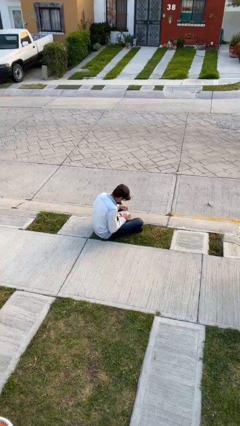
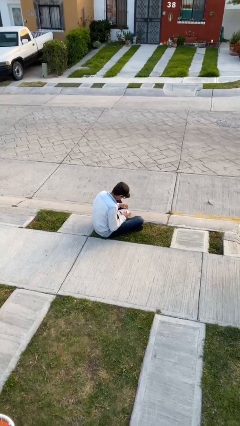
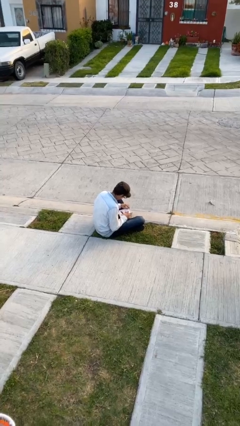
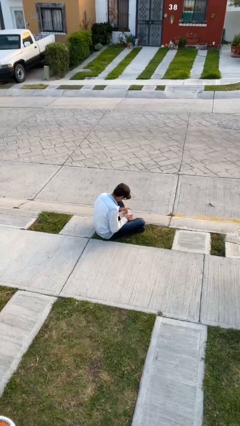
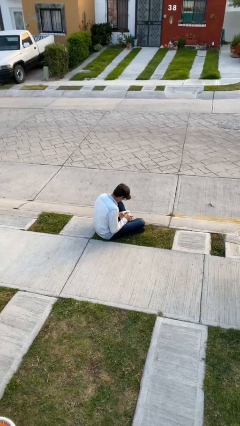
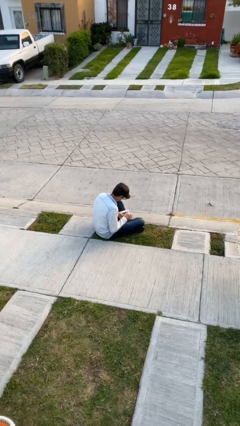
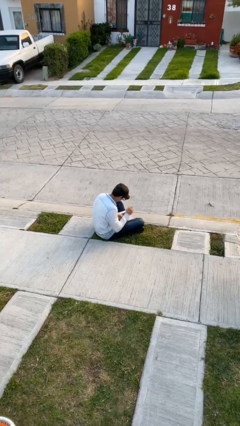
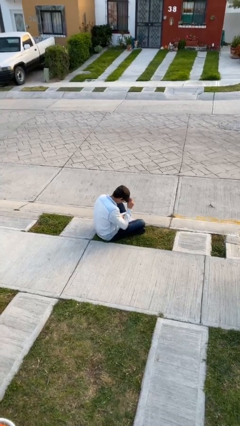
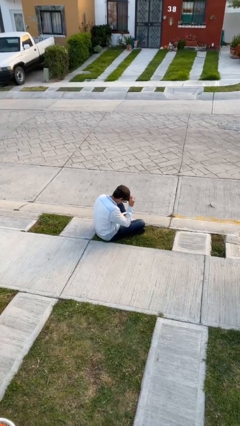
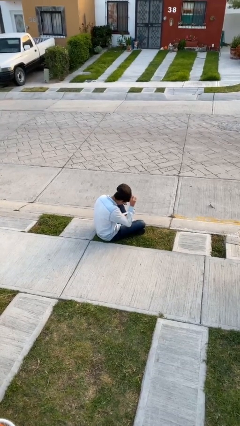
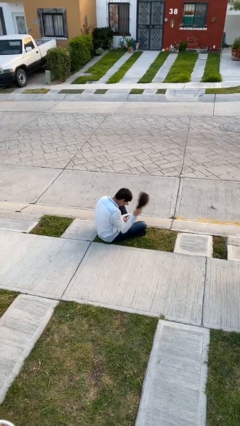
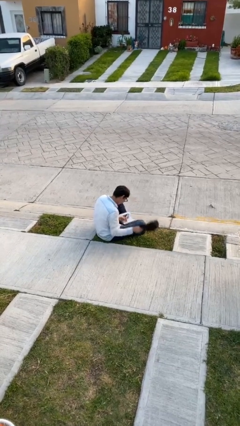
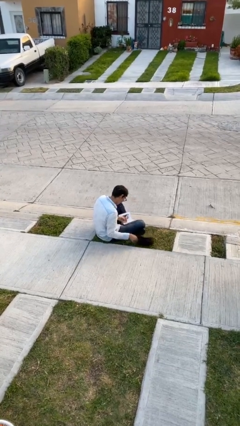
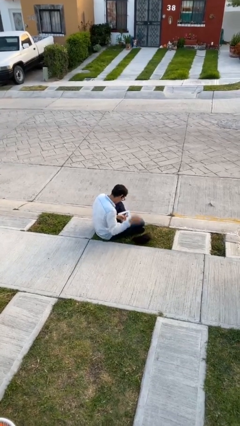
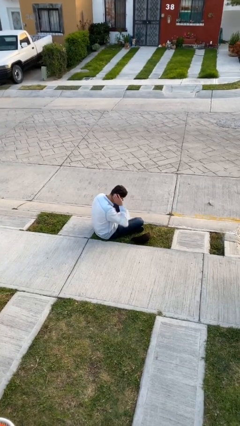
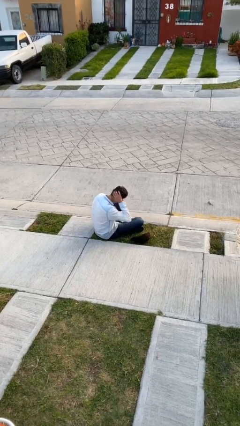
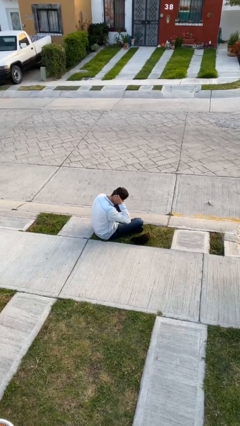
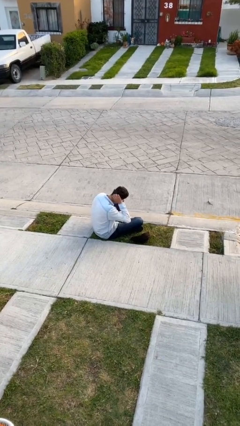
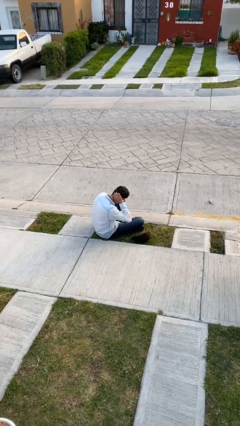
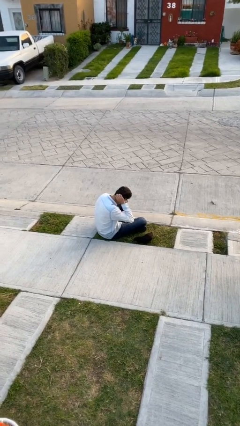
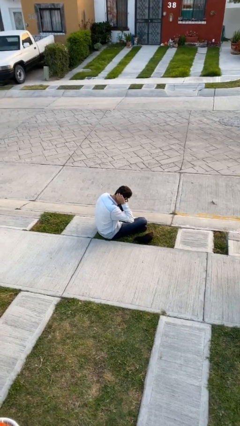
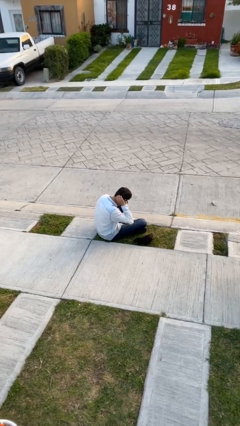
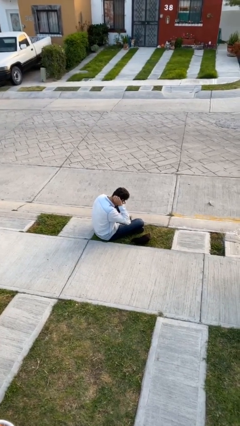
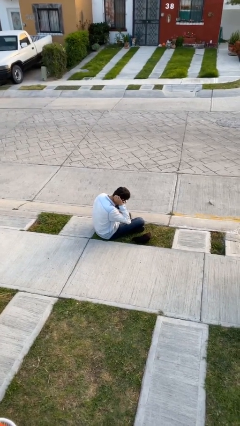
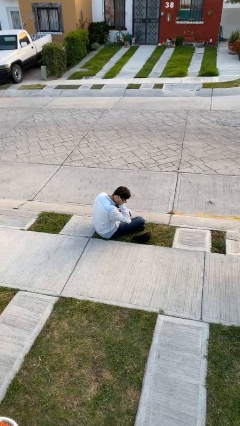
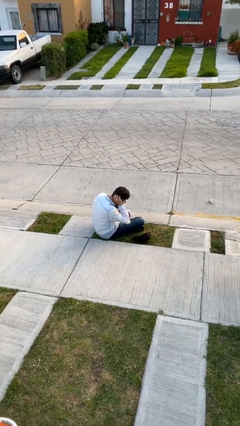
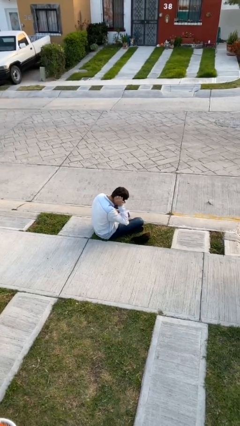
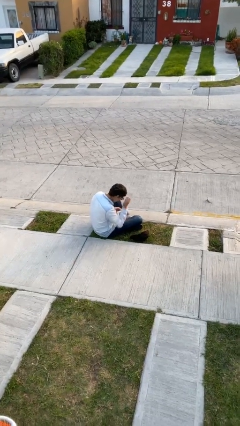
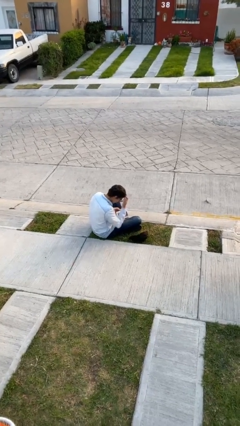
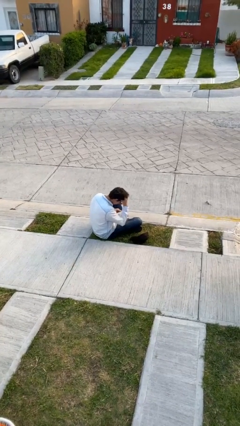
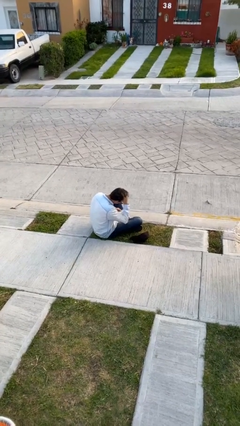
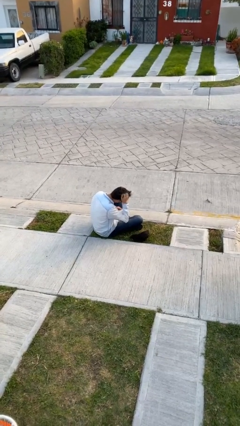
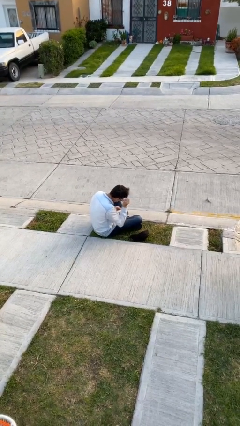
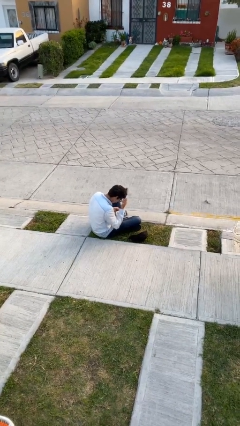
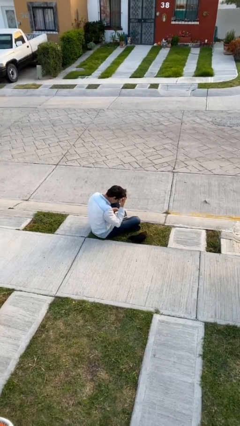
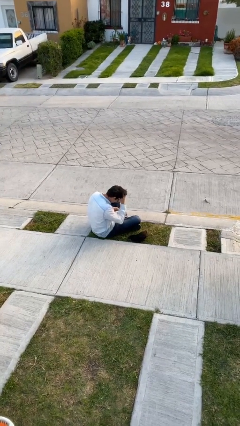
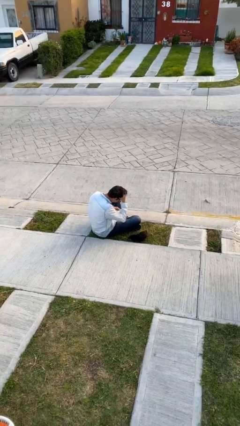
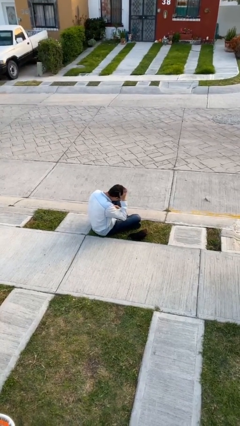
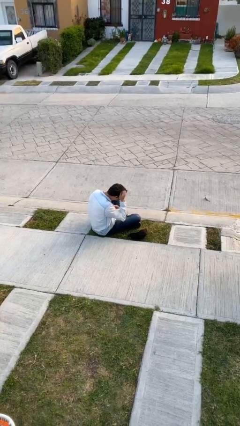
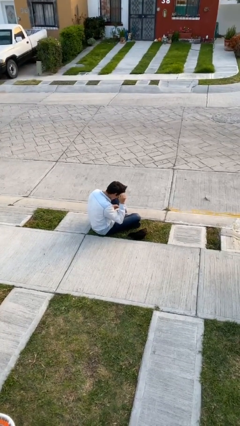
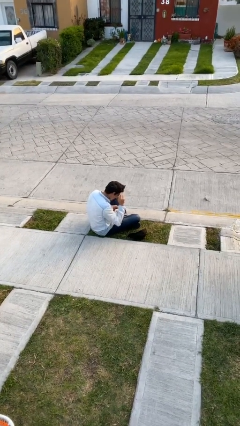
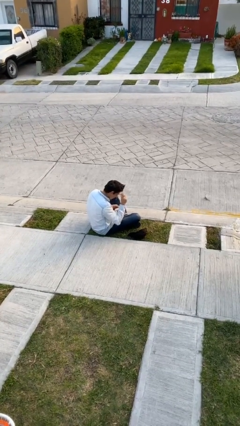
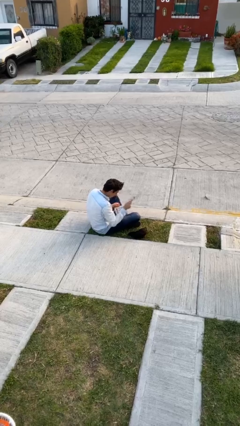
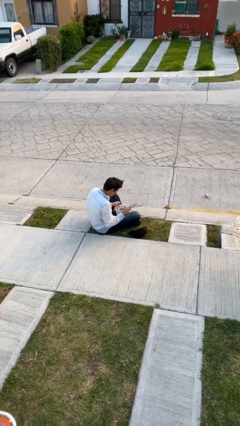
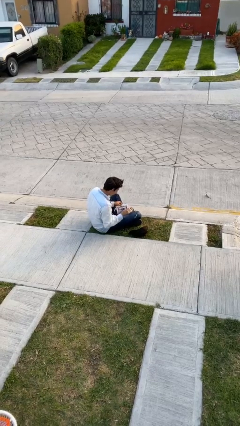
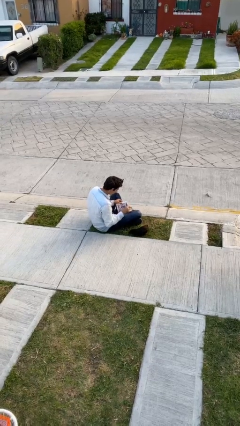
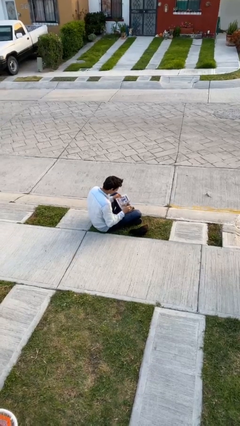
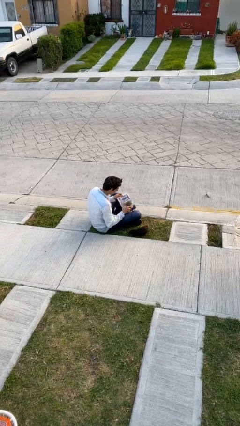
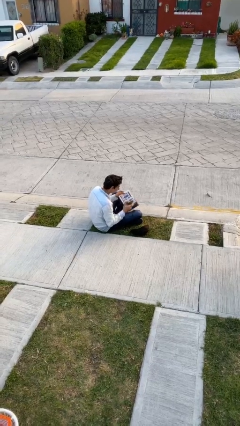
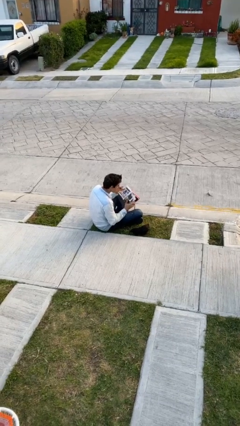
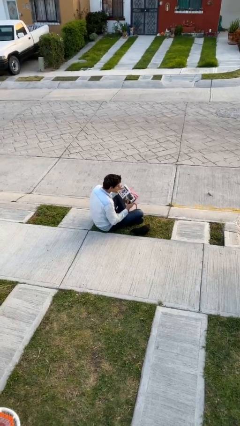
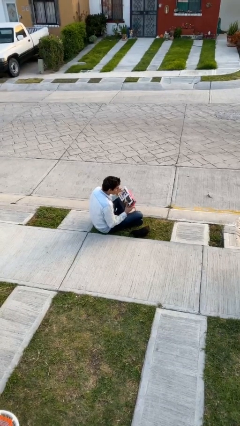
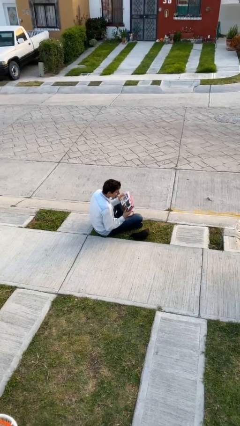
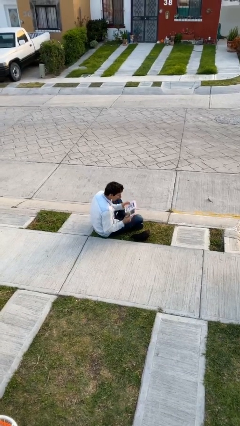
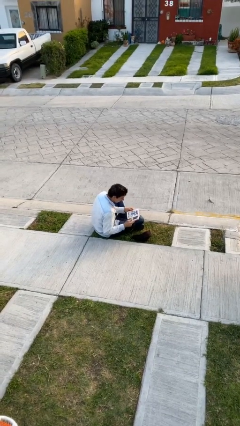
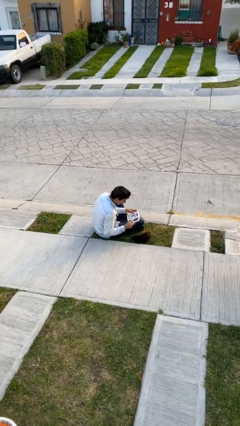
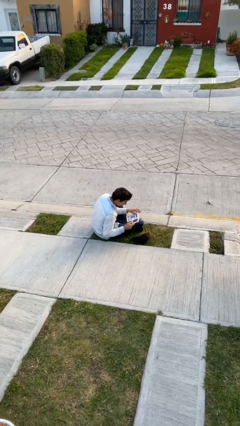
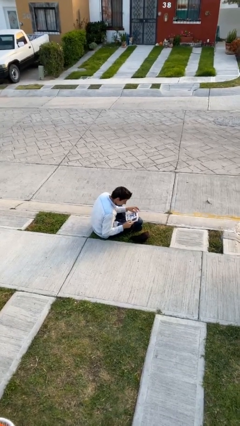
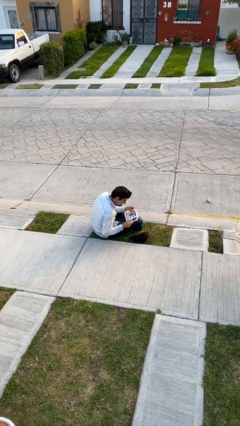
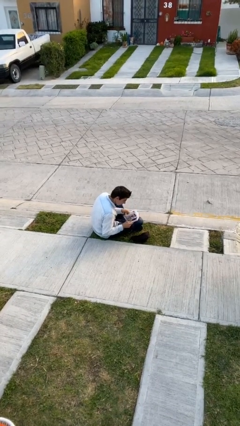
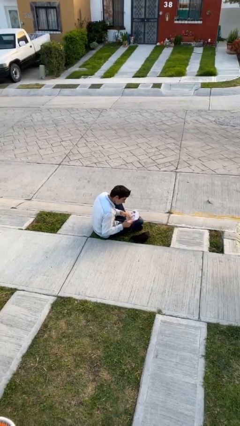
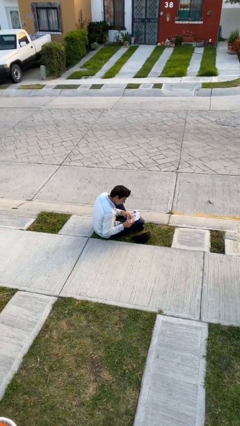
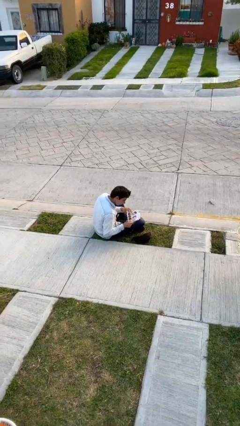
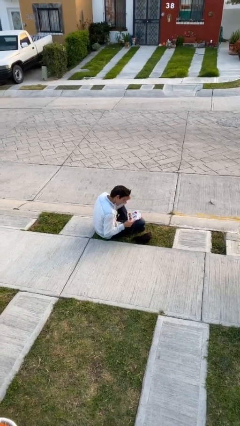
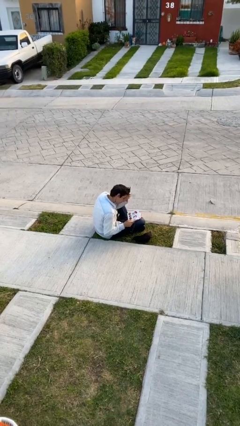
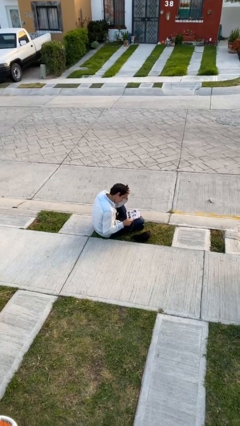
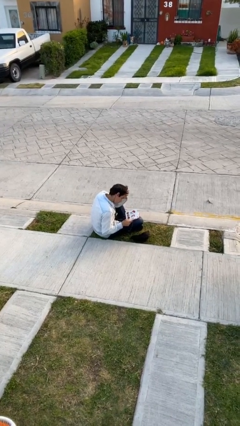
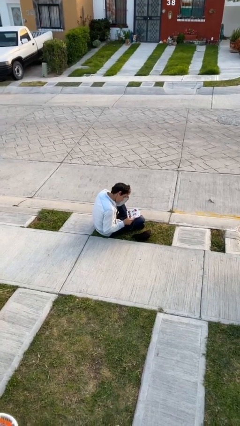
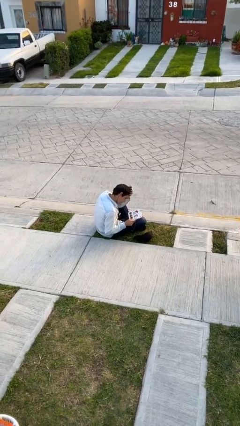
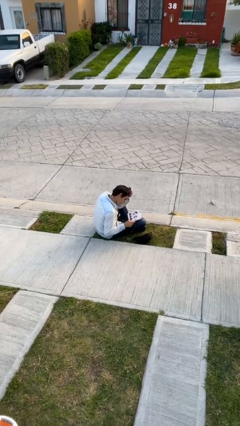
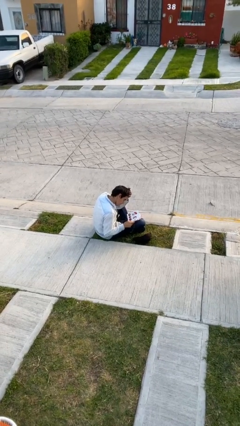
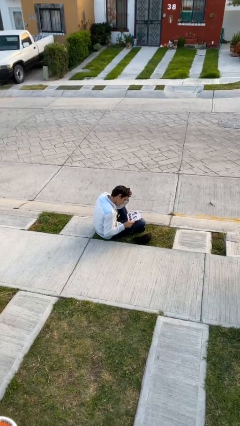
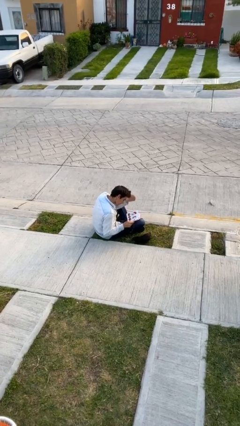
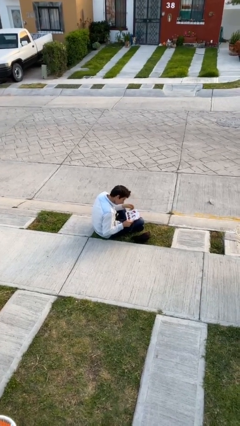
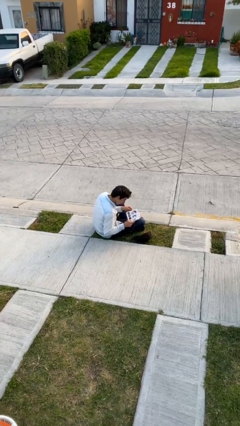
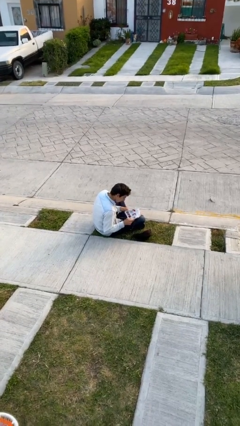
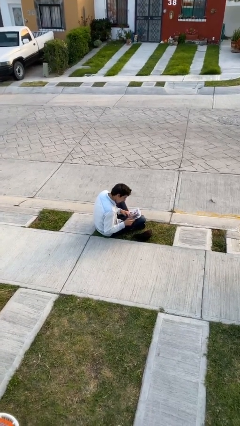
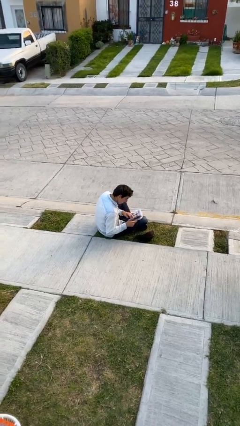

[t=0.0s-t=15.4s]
person reads document

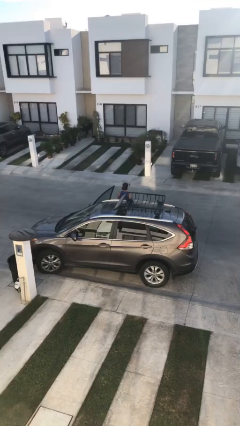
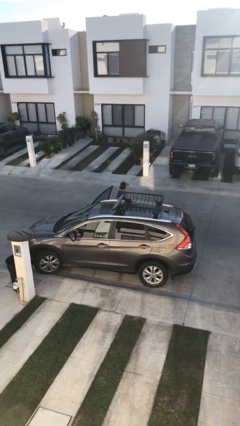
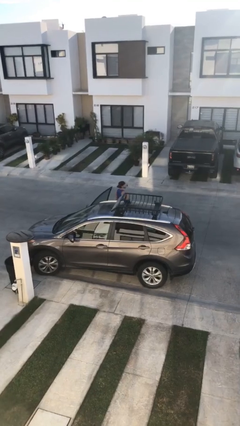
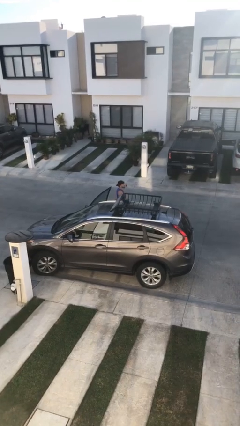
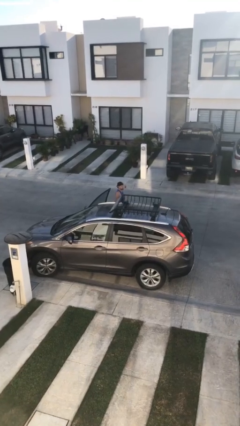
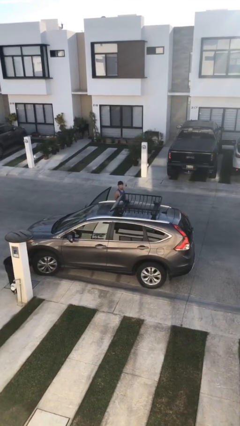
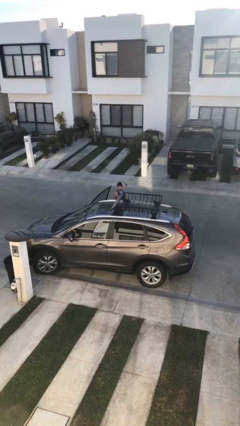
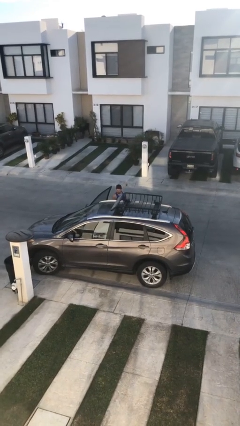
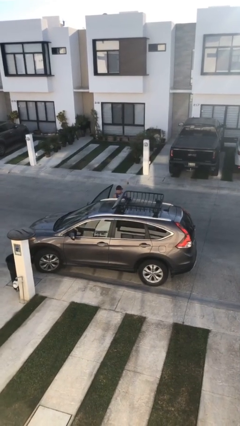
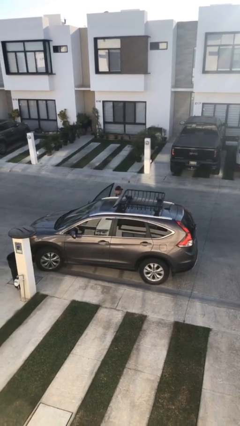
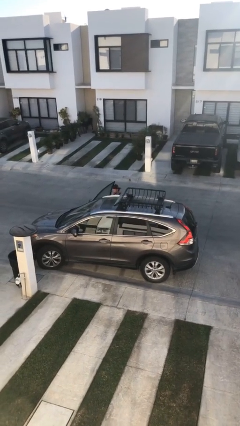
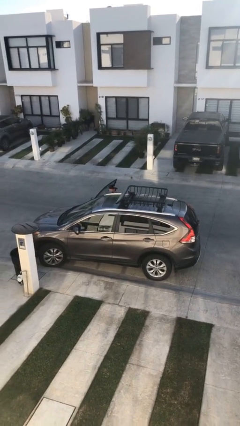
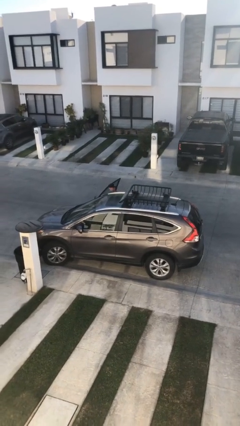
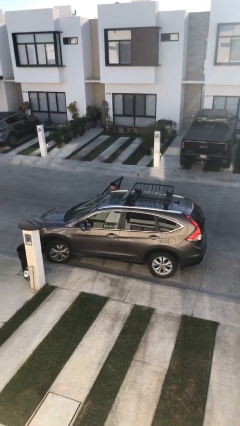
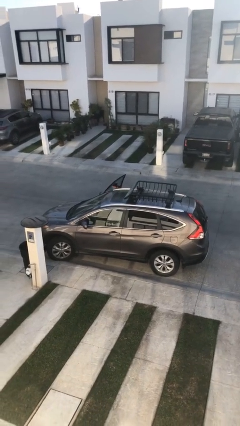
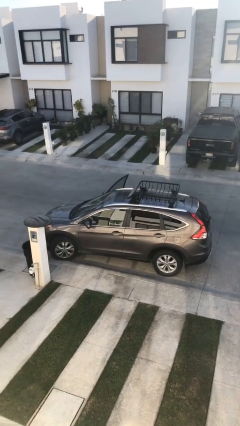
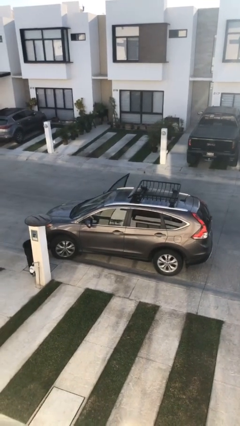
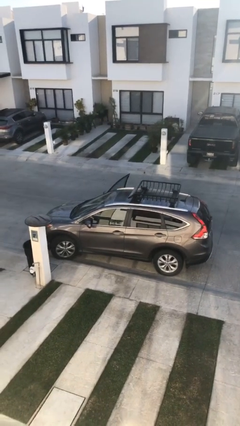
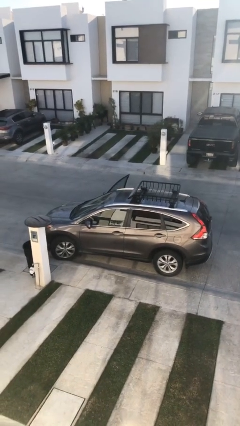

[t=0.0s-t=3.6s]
person enters car
